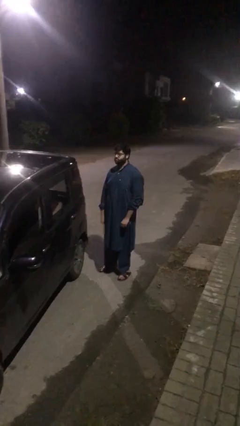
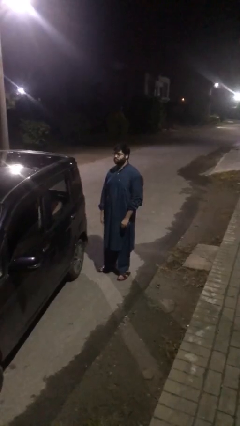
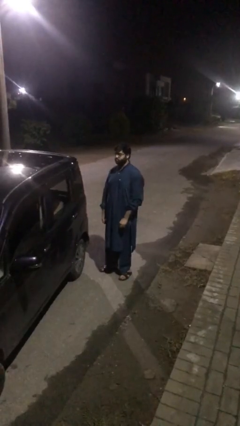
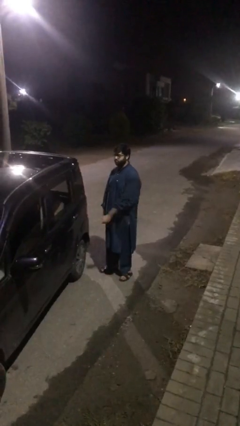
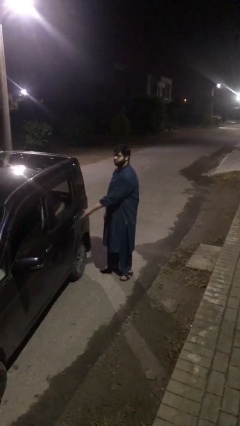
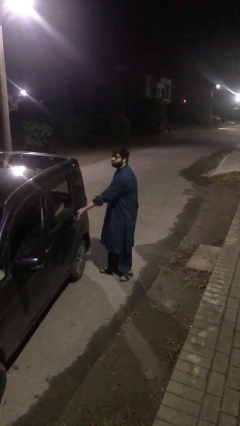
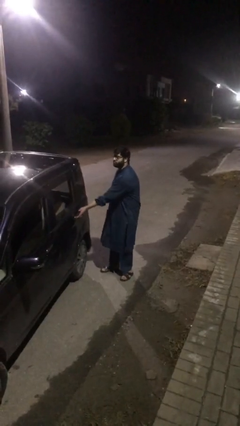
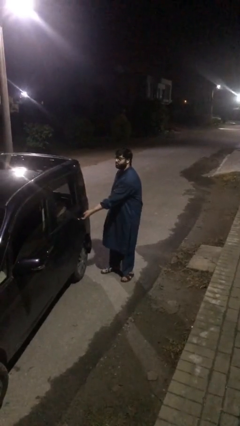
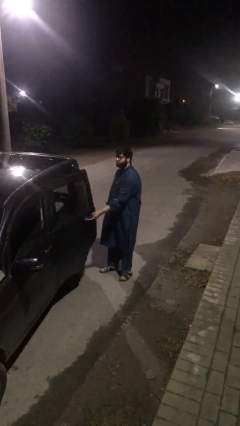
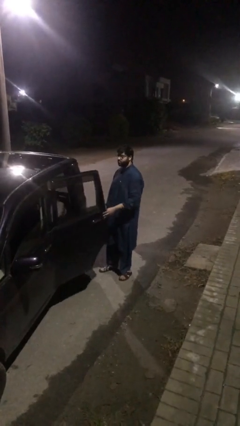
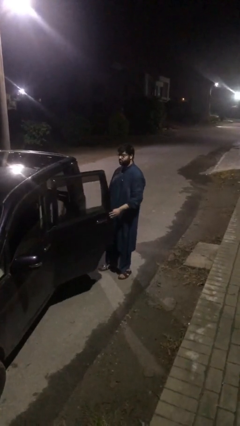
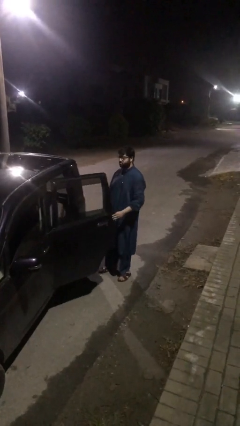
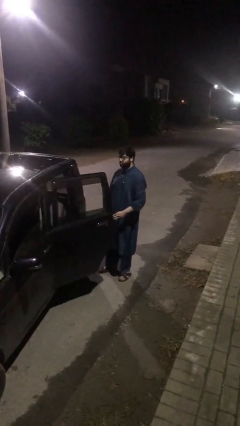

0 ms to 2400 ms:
person opens car door

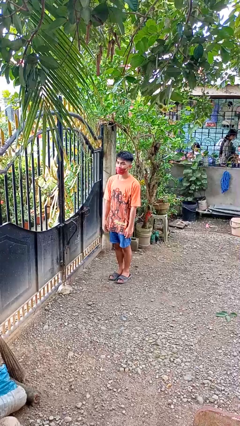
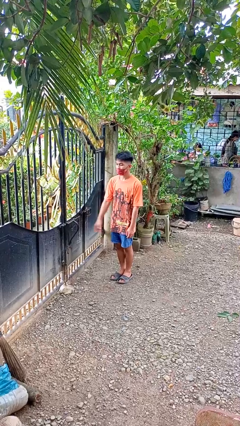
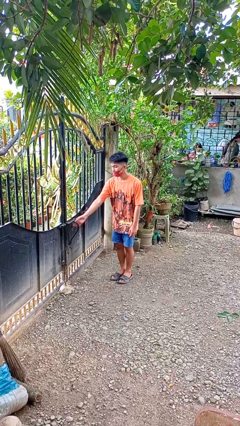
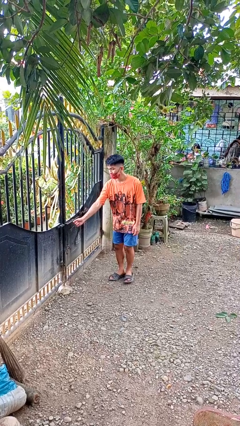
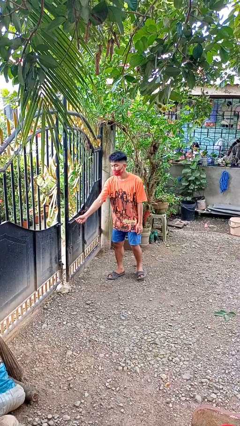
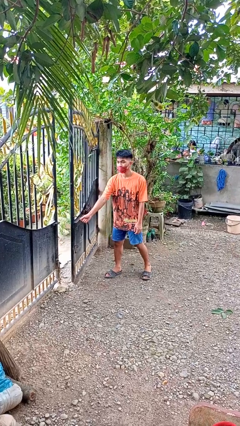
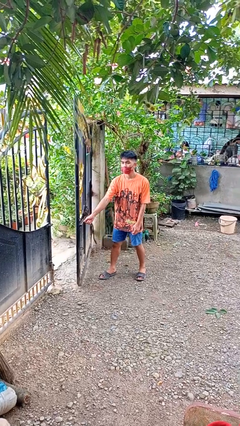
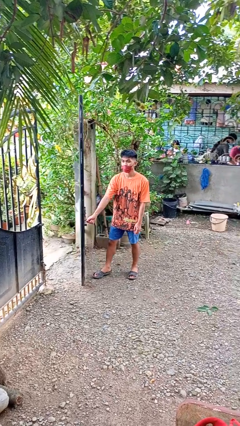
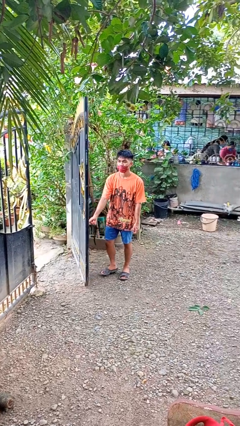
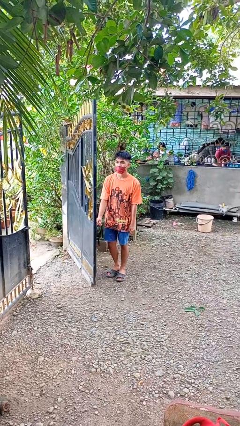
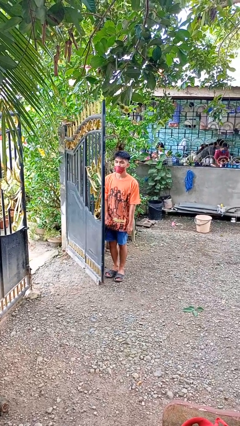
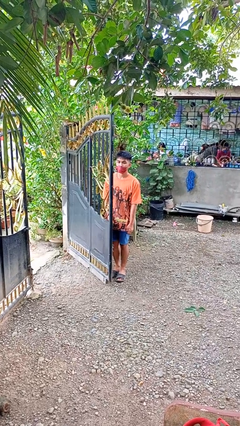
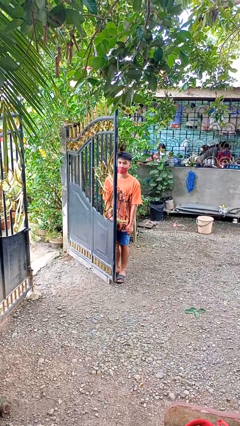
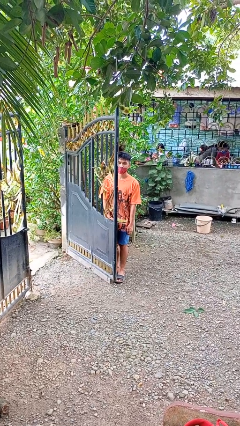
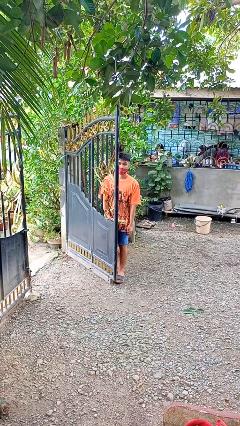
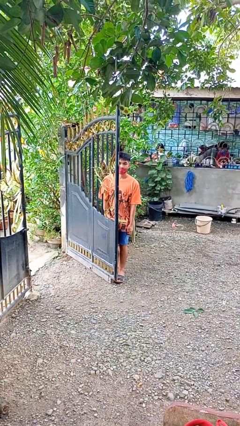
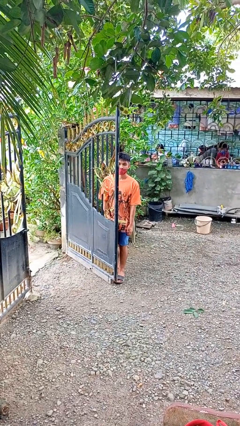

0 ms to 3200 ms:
person opens gate

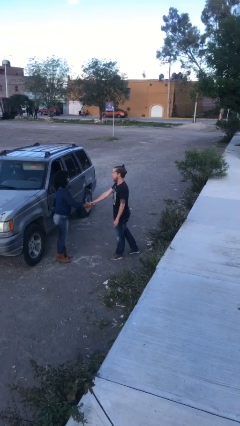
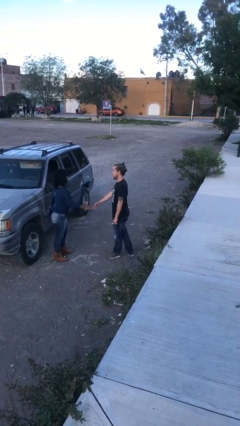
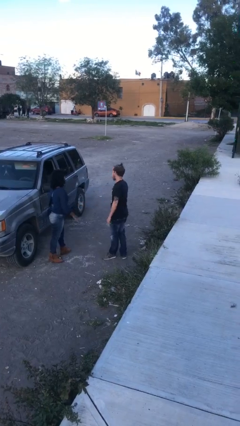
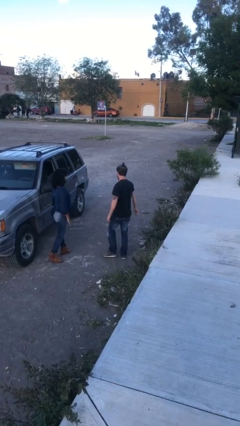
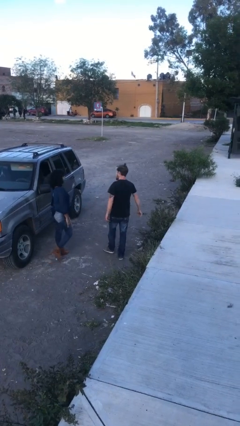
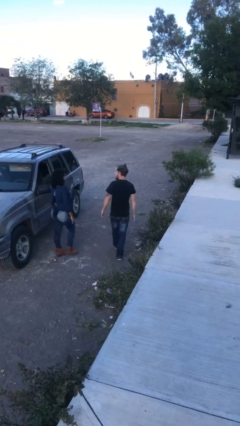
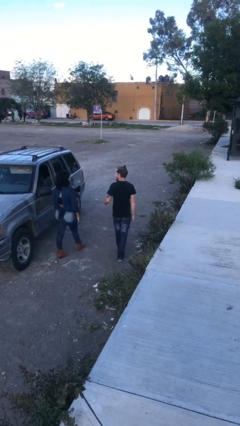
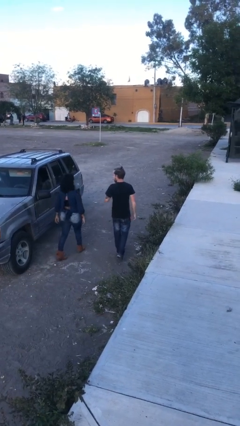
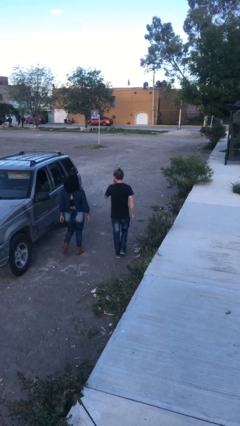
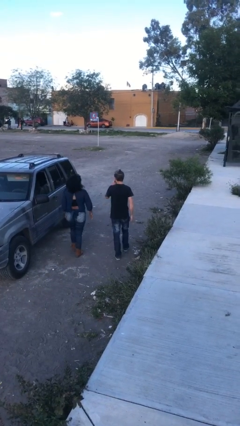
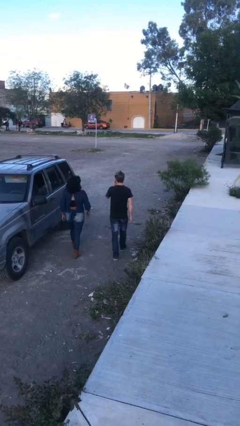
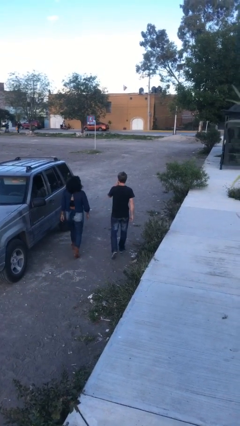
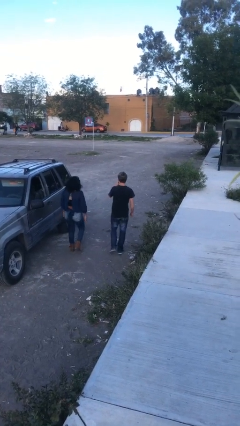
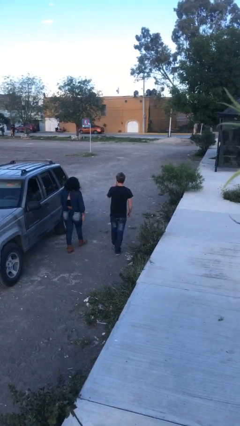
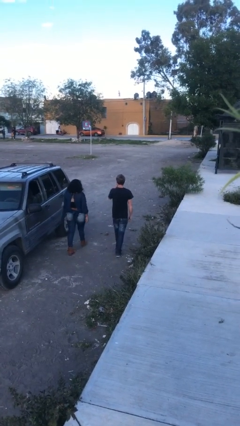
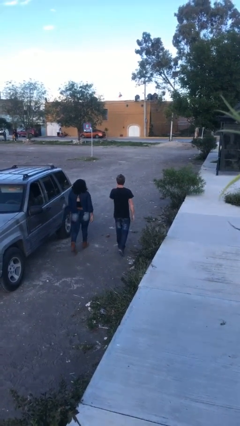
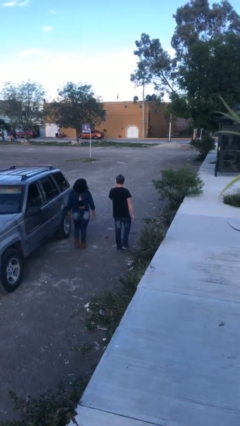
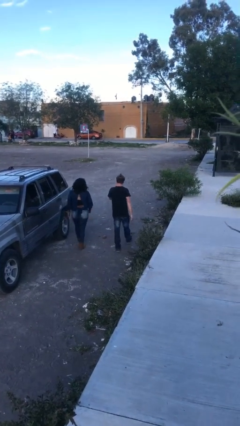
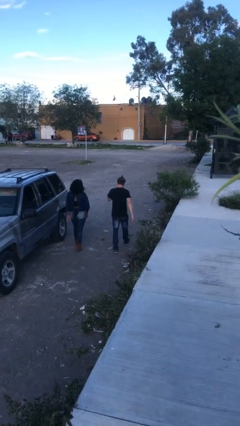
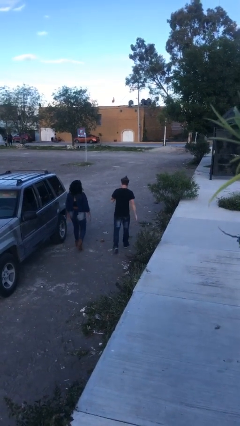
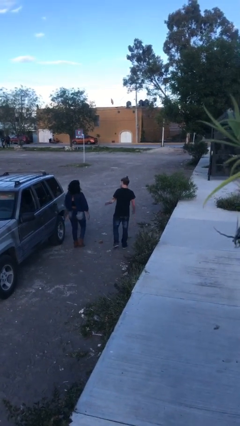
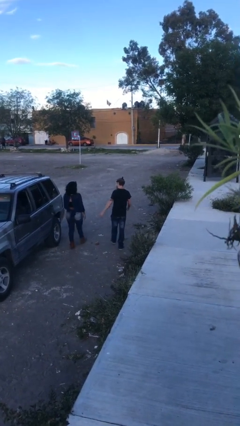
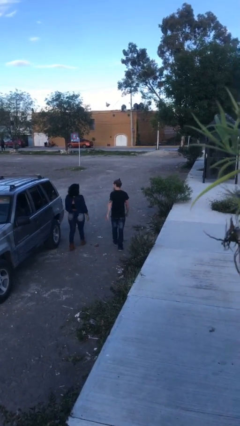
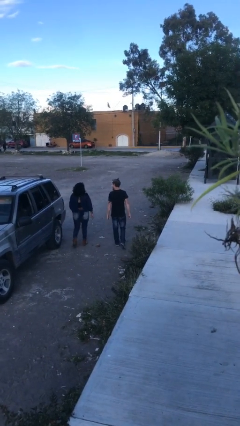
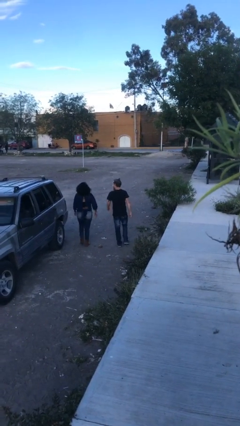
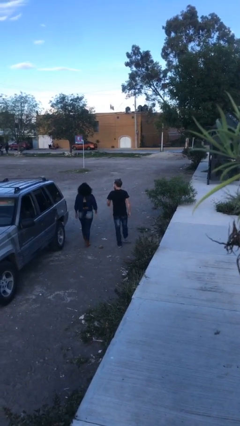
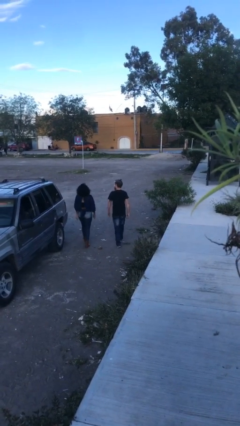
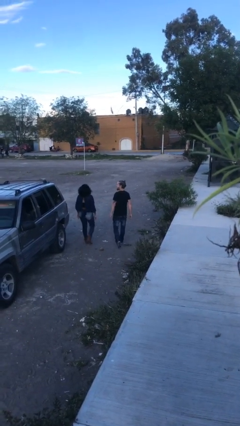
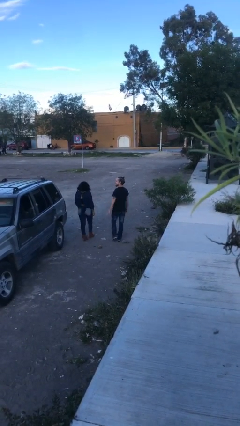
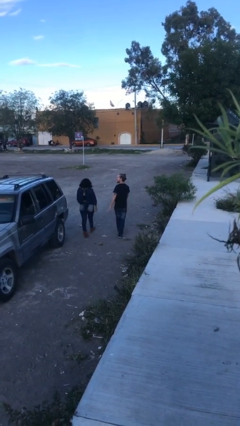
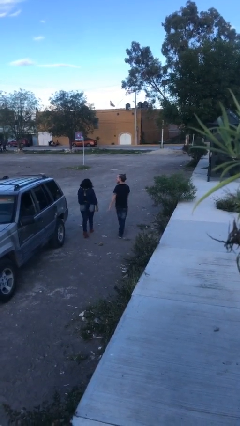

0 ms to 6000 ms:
person talks to person

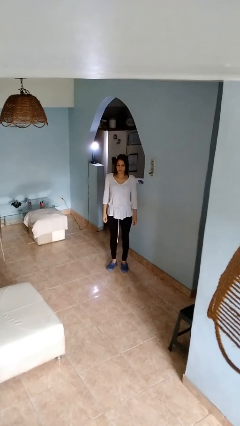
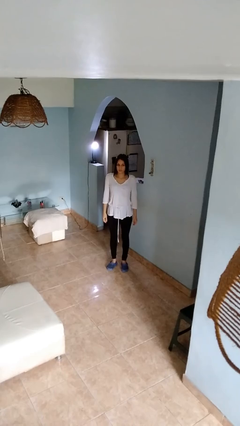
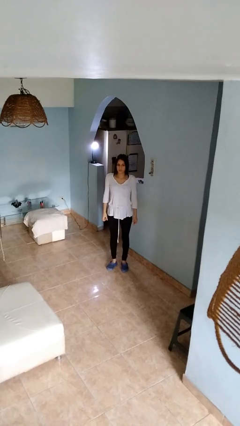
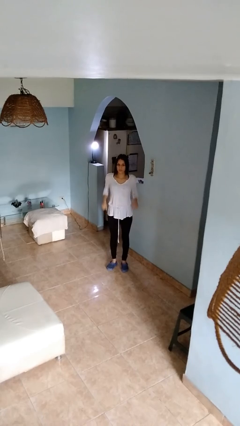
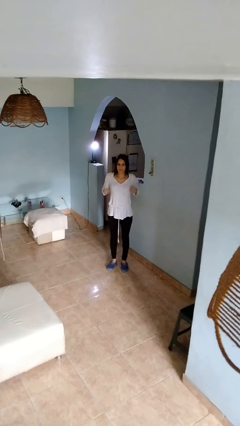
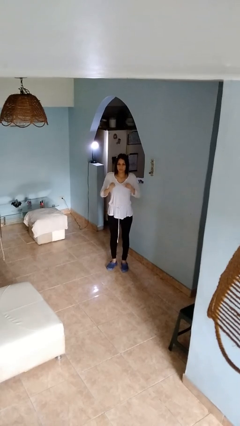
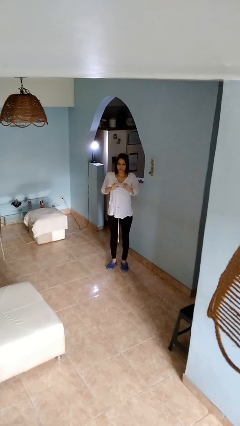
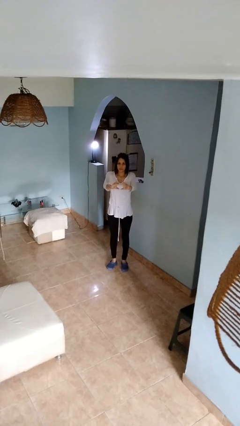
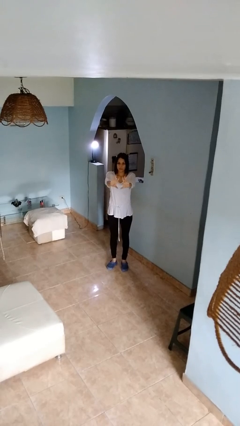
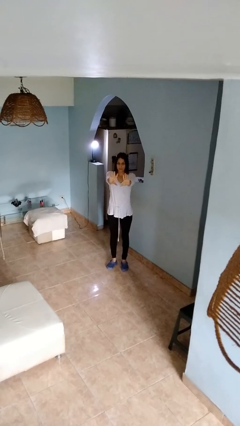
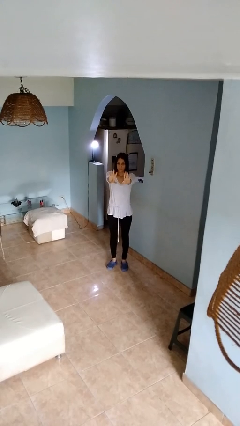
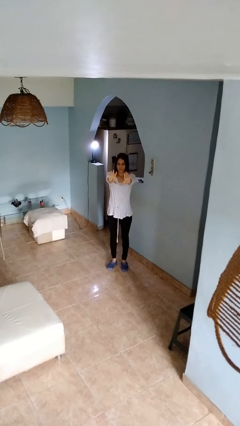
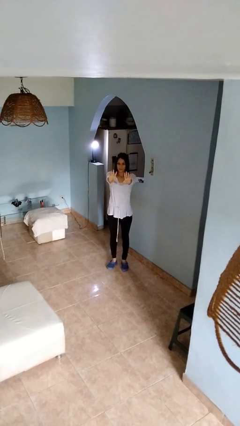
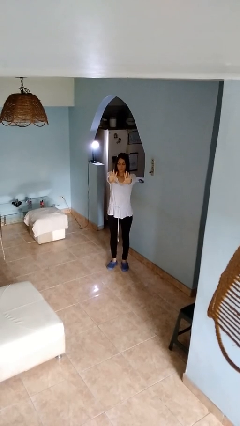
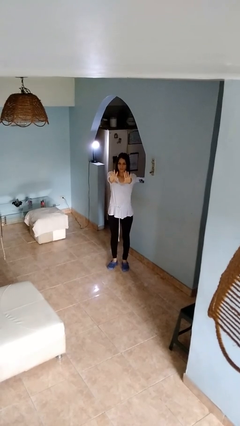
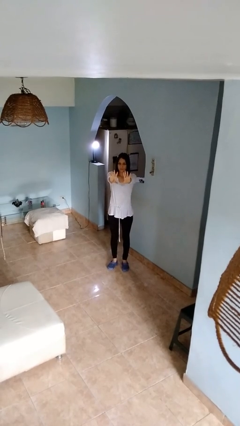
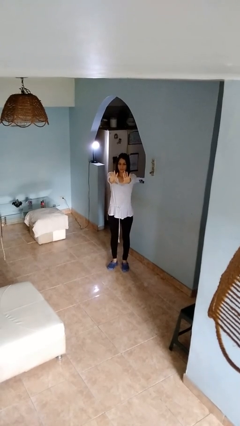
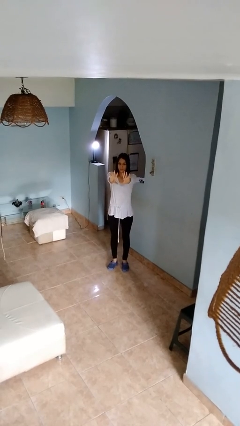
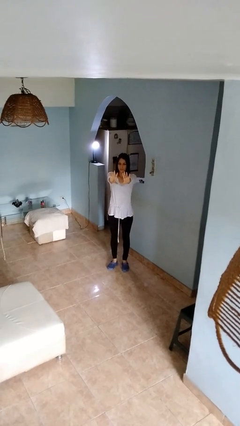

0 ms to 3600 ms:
person gestures zoom in

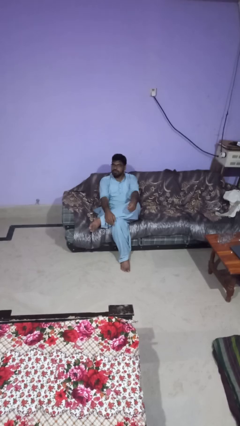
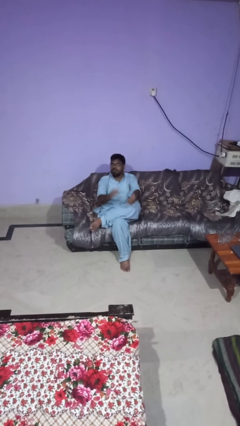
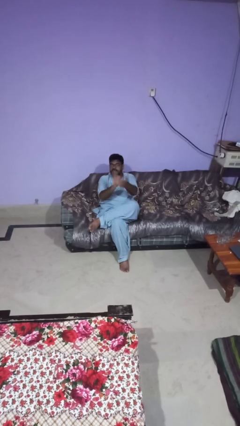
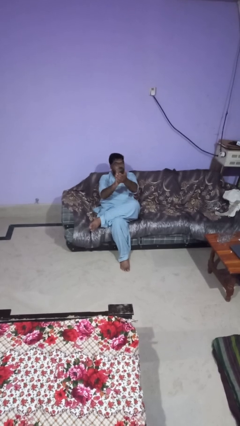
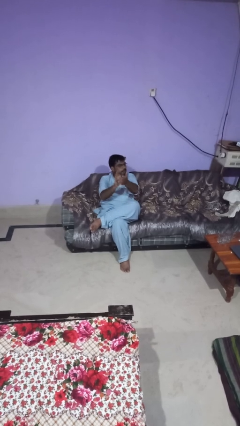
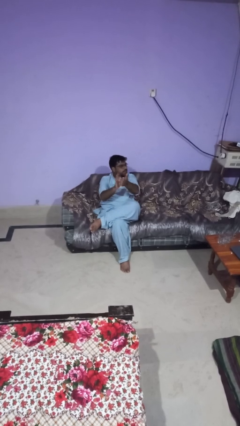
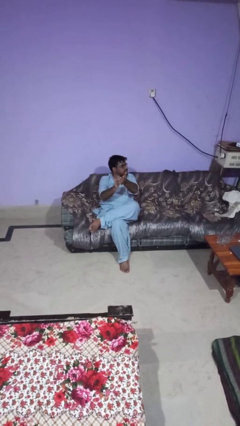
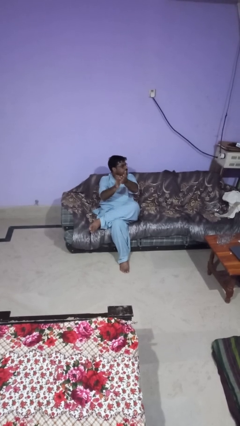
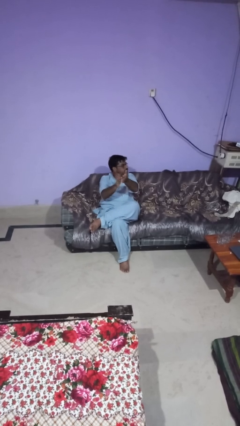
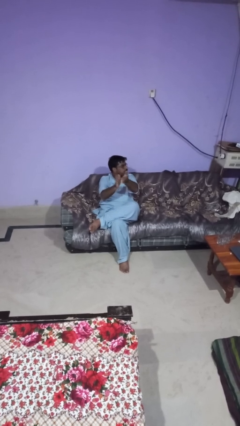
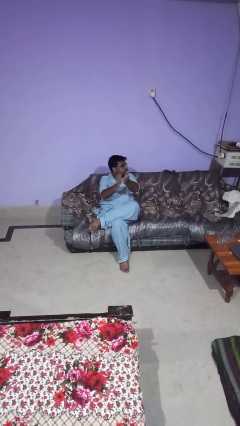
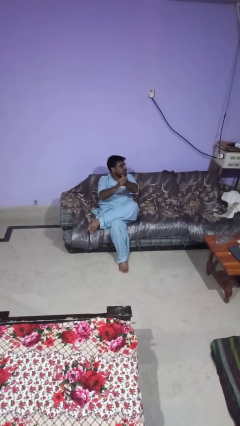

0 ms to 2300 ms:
person claps hands

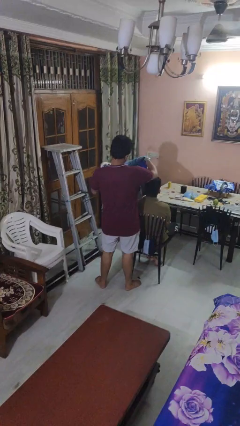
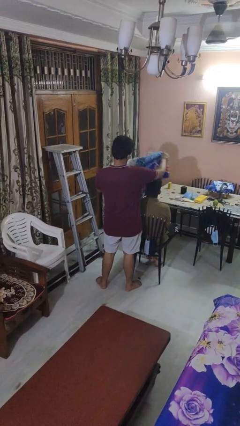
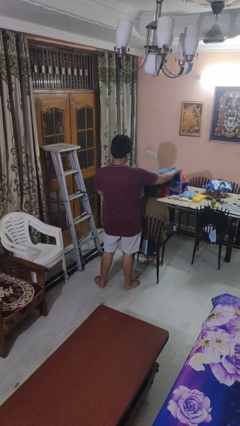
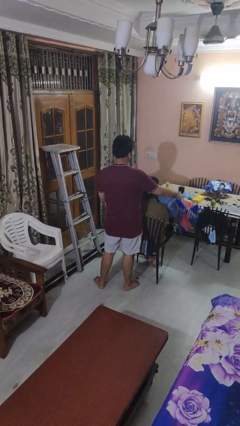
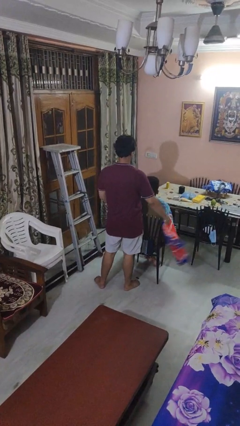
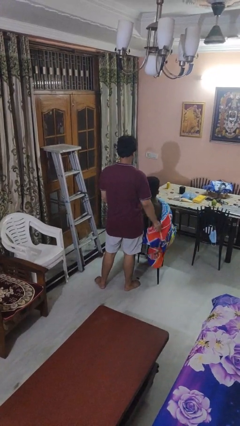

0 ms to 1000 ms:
person covers friend with blanket
